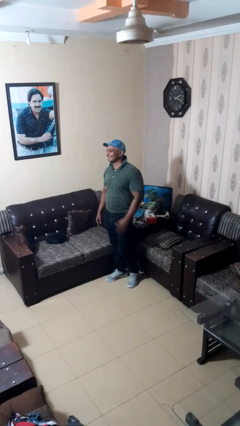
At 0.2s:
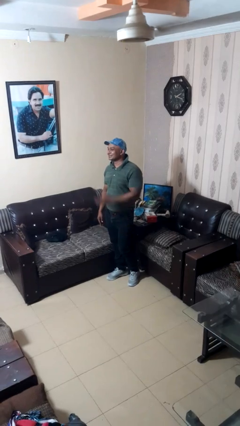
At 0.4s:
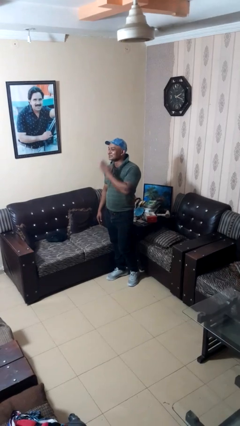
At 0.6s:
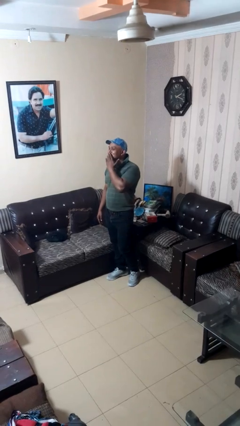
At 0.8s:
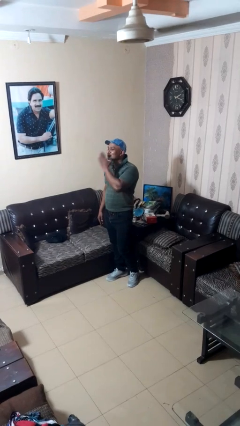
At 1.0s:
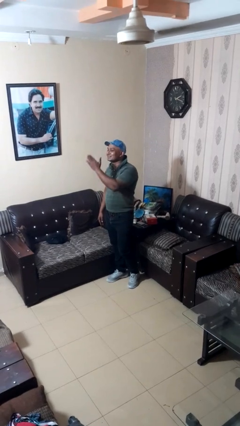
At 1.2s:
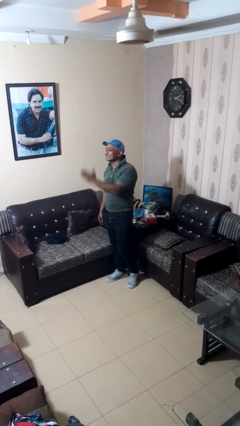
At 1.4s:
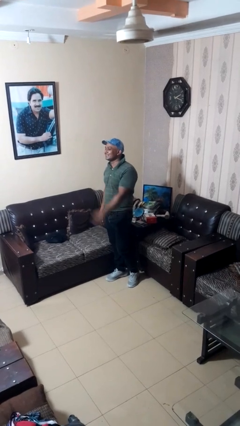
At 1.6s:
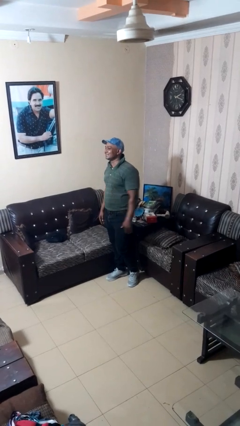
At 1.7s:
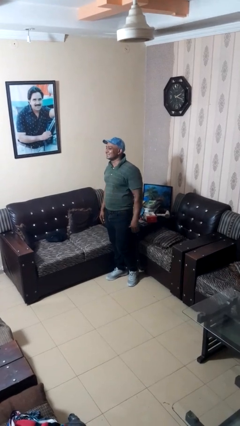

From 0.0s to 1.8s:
person gestures blow kiss

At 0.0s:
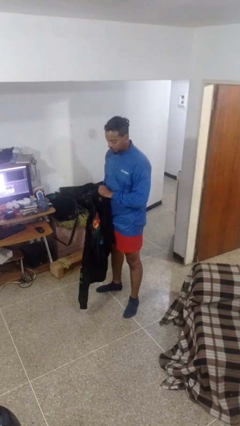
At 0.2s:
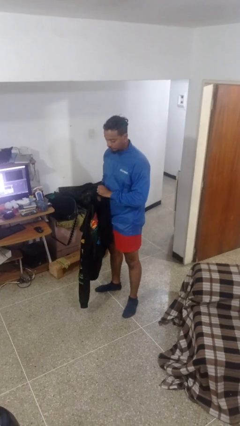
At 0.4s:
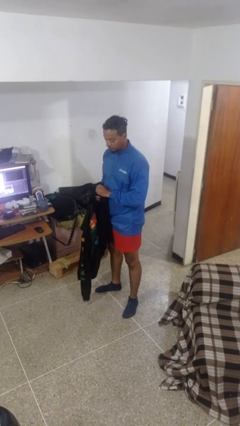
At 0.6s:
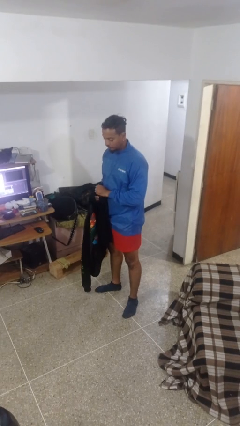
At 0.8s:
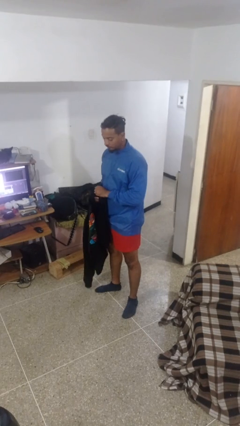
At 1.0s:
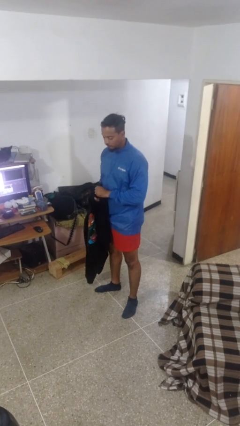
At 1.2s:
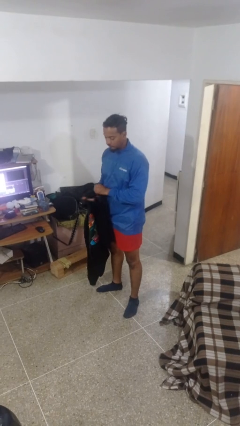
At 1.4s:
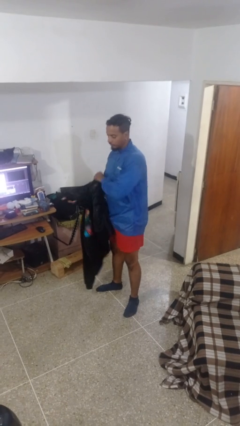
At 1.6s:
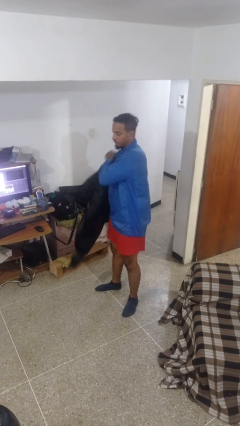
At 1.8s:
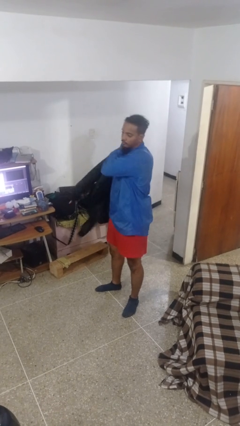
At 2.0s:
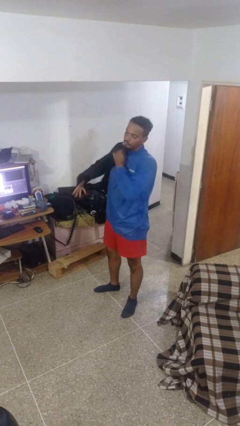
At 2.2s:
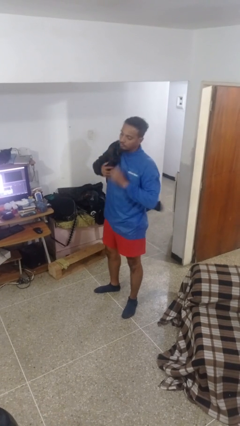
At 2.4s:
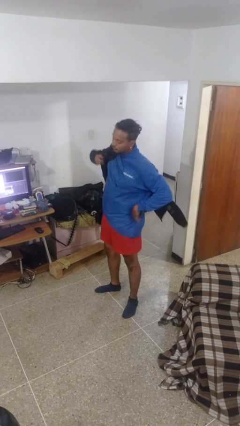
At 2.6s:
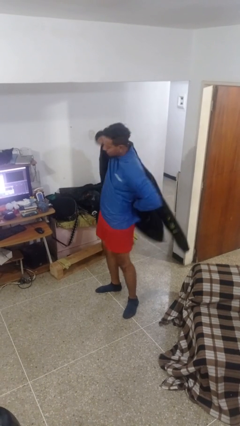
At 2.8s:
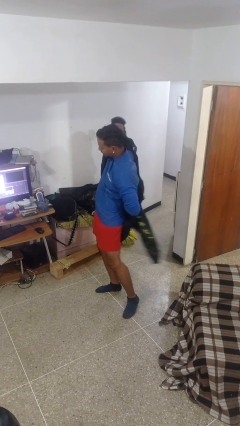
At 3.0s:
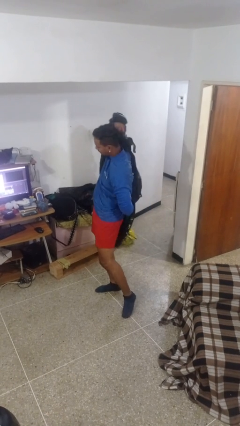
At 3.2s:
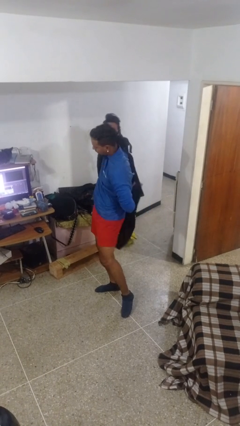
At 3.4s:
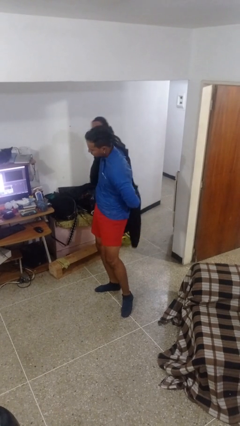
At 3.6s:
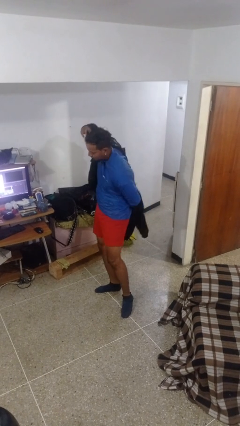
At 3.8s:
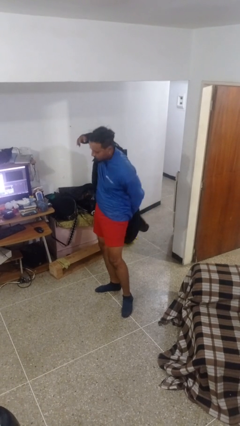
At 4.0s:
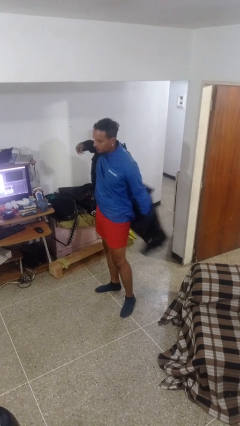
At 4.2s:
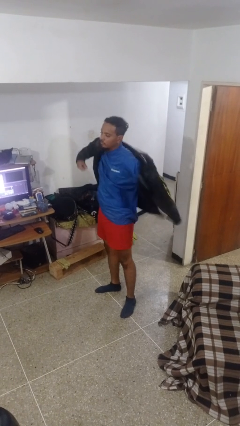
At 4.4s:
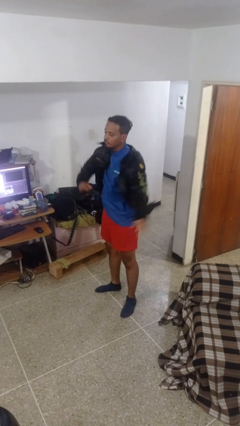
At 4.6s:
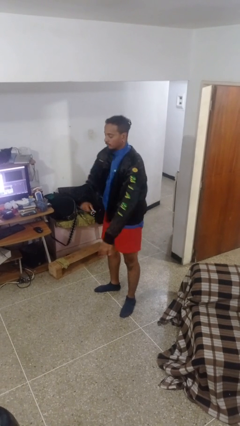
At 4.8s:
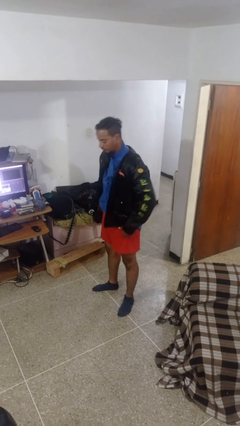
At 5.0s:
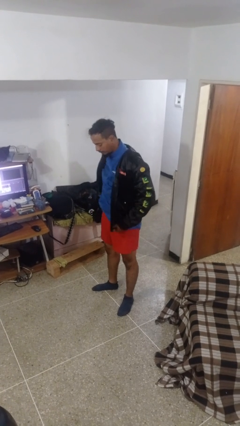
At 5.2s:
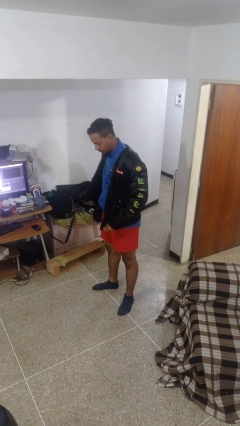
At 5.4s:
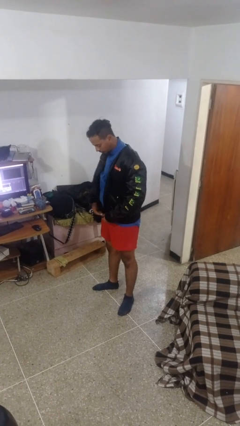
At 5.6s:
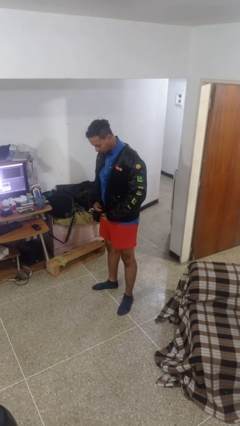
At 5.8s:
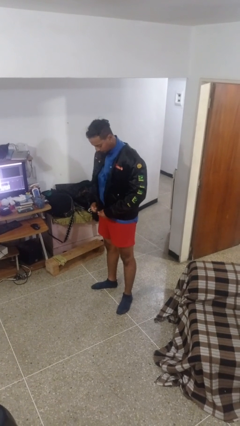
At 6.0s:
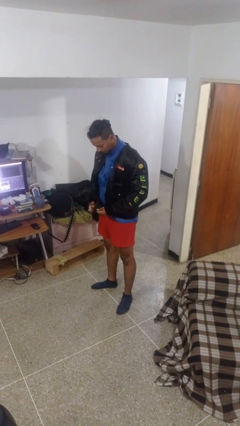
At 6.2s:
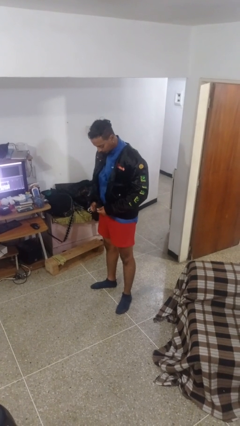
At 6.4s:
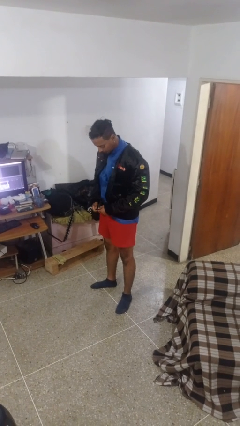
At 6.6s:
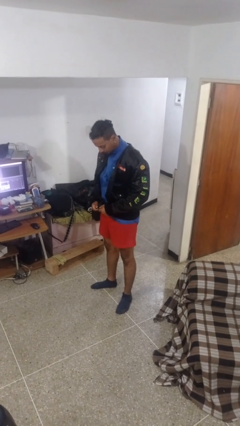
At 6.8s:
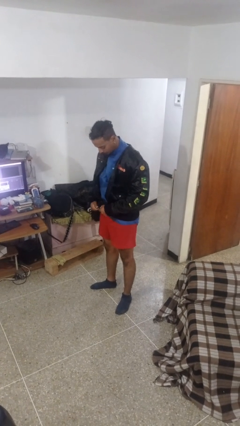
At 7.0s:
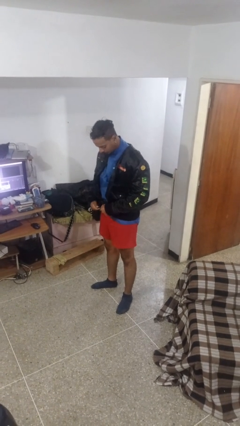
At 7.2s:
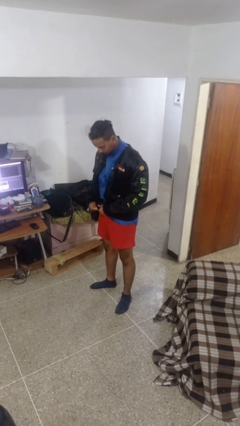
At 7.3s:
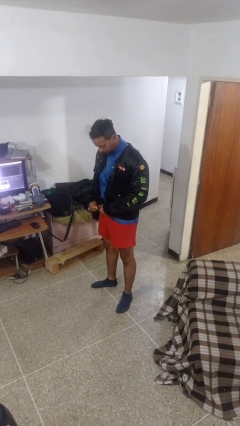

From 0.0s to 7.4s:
person puts on jacket

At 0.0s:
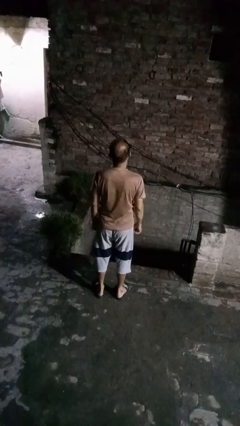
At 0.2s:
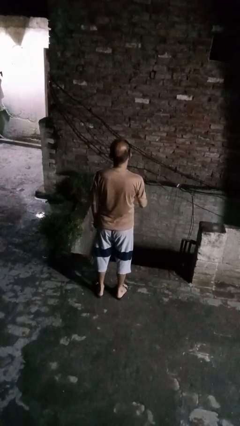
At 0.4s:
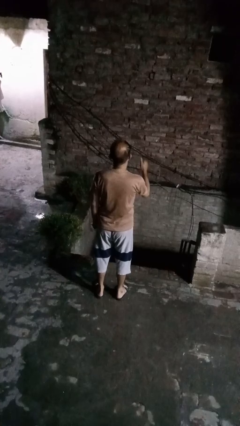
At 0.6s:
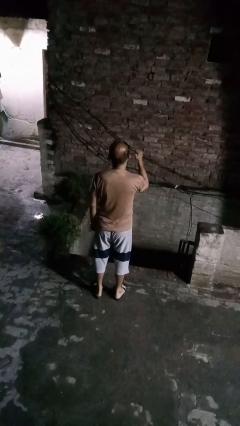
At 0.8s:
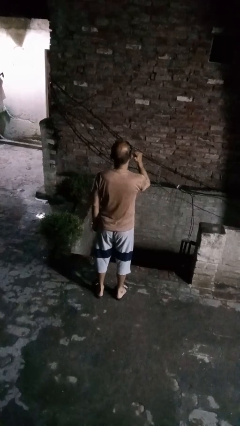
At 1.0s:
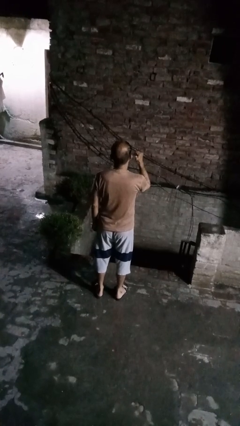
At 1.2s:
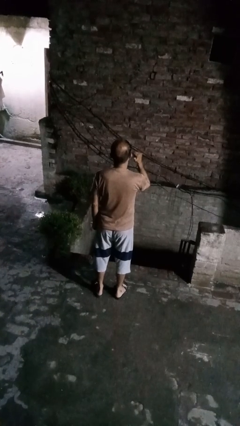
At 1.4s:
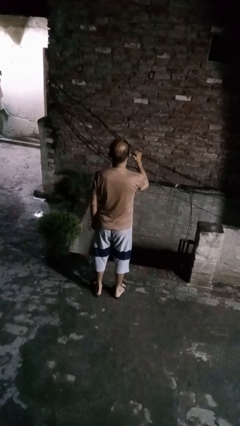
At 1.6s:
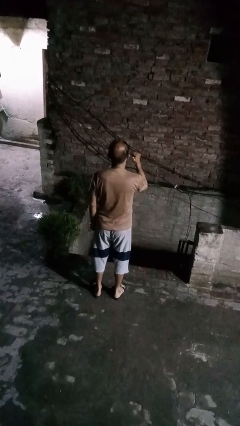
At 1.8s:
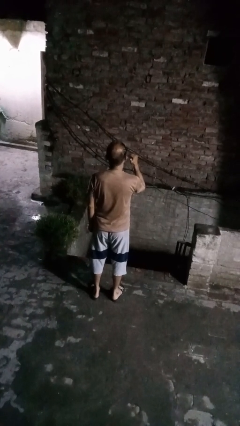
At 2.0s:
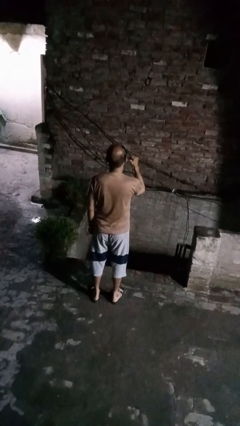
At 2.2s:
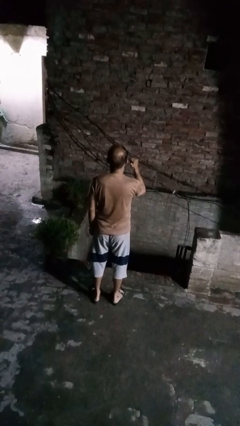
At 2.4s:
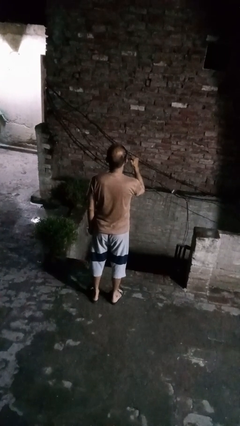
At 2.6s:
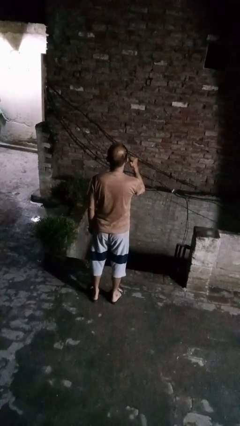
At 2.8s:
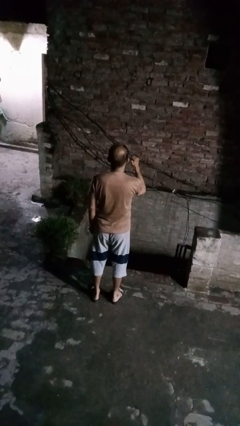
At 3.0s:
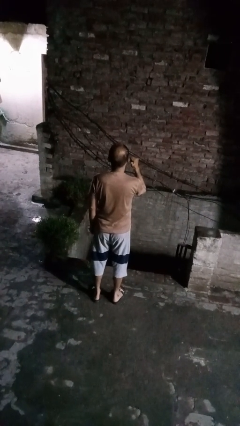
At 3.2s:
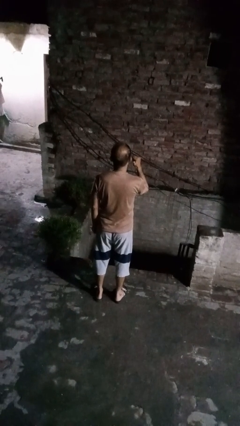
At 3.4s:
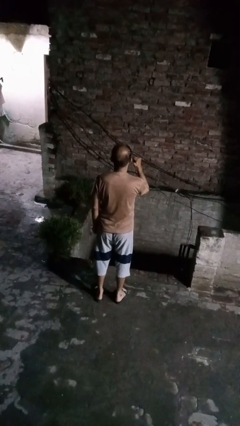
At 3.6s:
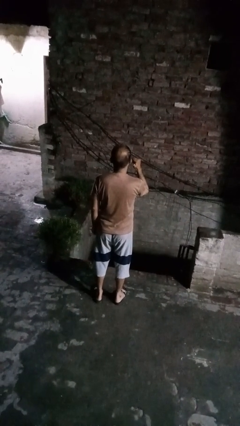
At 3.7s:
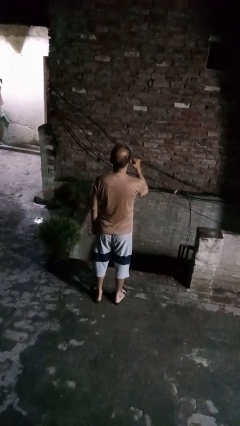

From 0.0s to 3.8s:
person gestures behind me

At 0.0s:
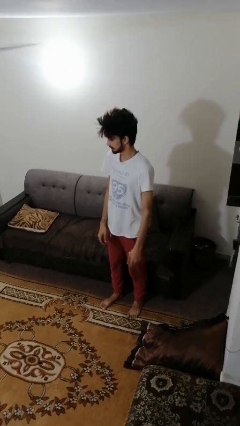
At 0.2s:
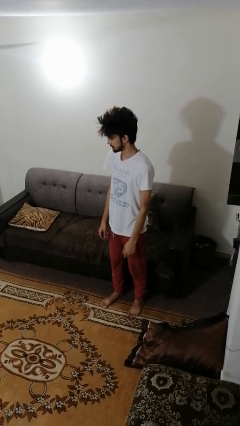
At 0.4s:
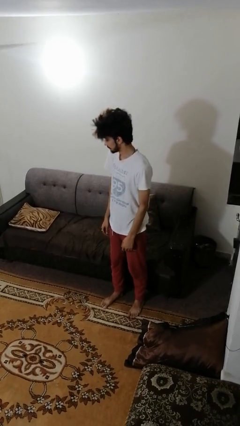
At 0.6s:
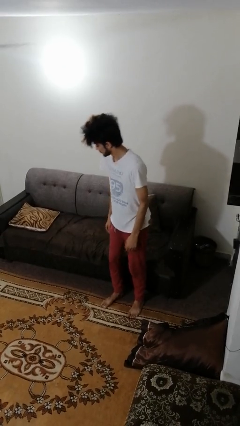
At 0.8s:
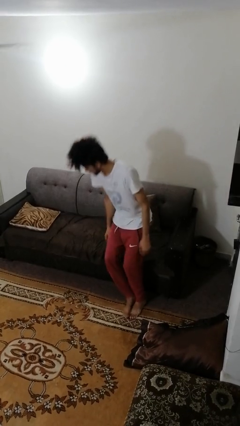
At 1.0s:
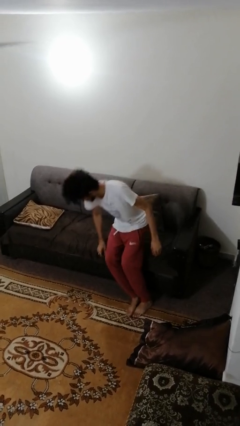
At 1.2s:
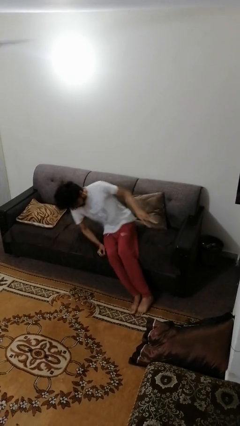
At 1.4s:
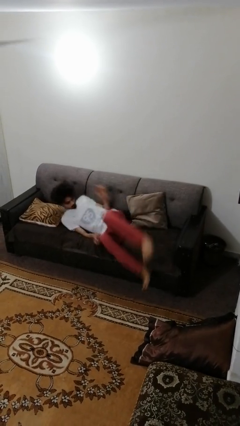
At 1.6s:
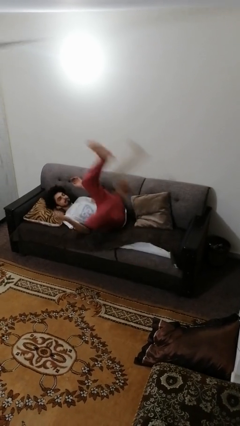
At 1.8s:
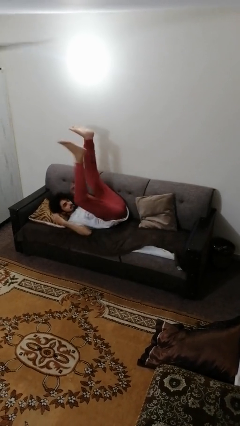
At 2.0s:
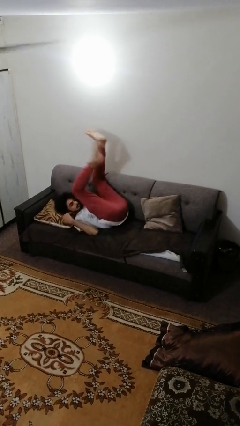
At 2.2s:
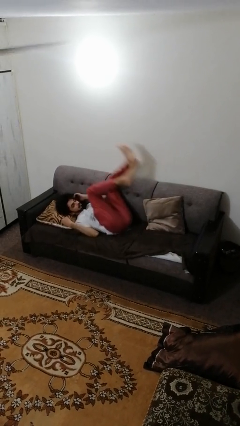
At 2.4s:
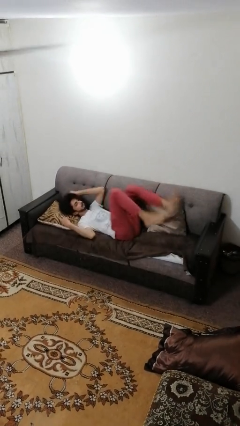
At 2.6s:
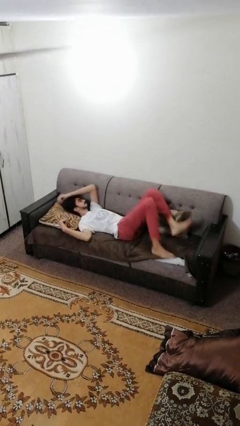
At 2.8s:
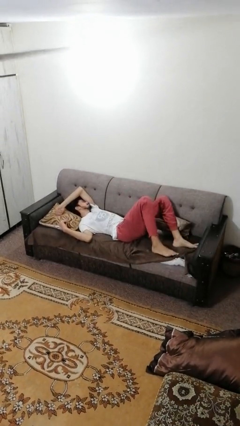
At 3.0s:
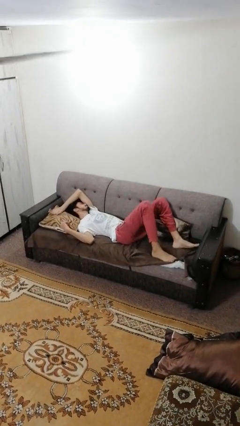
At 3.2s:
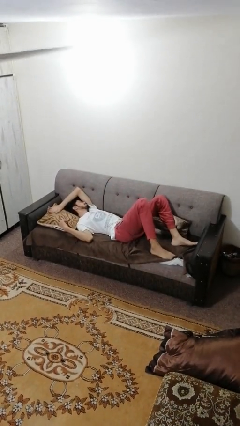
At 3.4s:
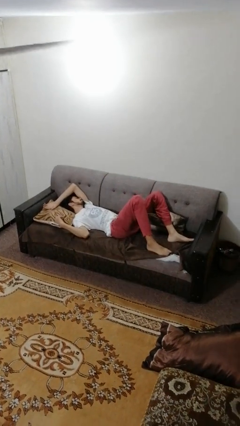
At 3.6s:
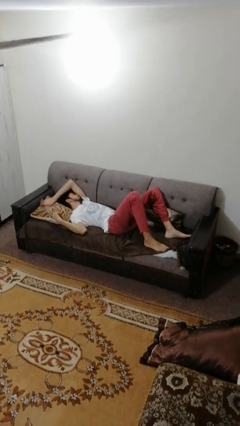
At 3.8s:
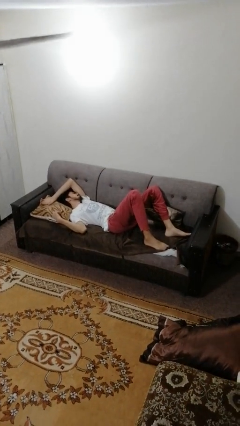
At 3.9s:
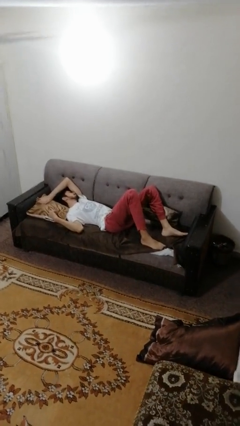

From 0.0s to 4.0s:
person lies down on couch

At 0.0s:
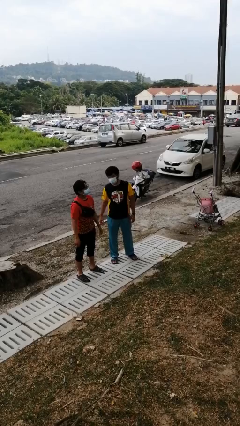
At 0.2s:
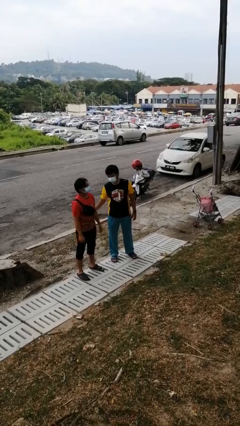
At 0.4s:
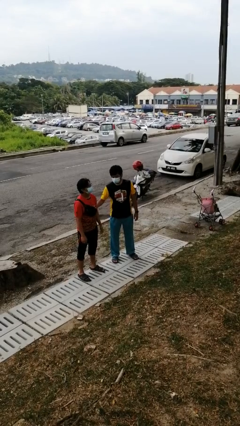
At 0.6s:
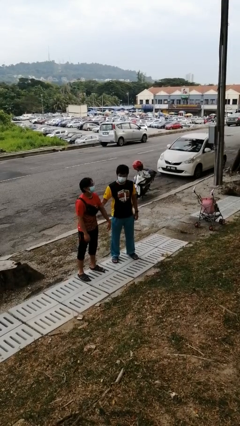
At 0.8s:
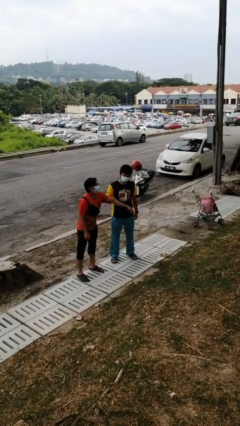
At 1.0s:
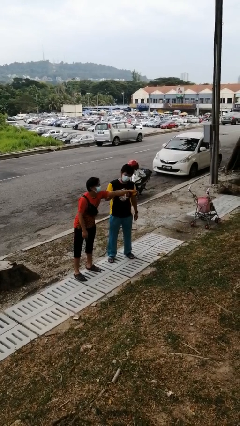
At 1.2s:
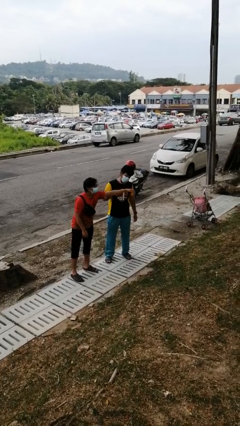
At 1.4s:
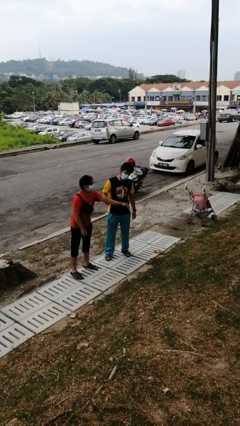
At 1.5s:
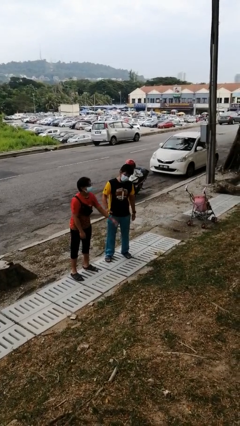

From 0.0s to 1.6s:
person grabs person by bicep
